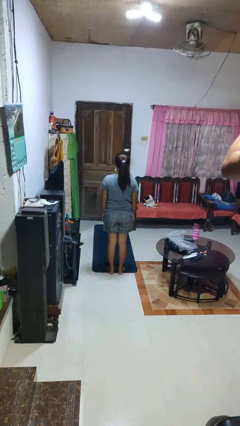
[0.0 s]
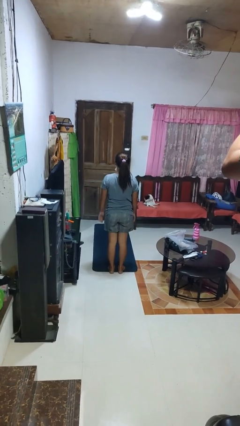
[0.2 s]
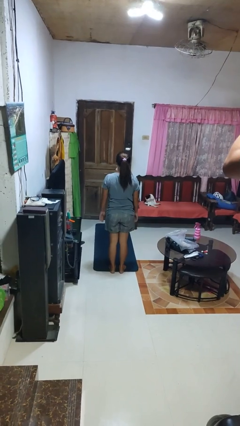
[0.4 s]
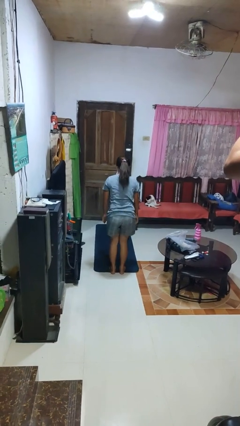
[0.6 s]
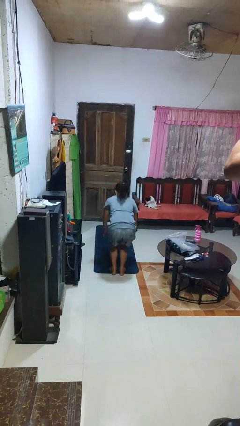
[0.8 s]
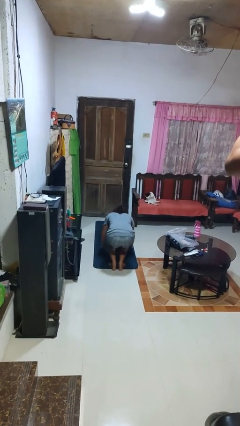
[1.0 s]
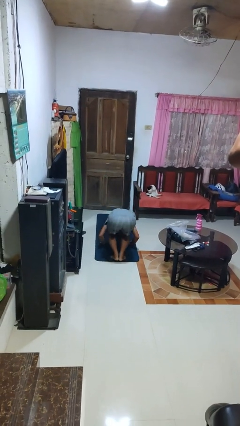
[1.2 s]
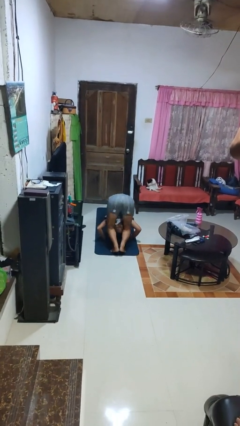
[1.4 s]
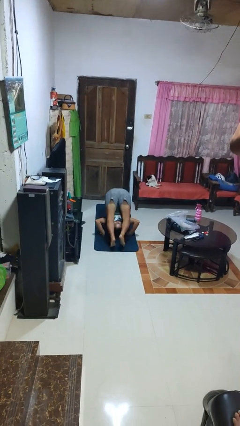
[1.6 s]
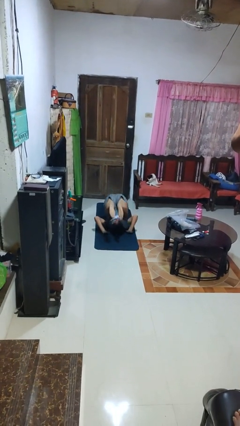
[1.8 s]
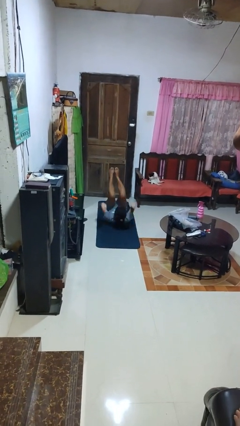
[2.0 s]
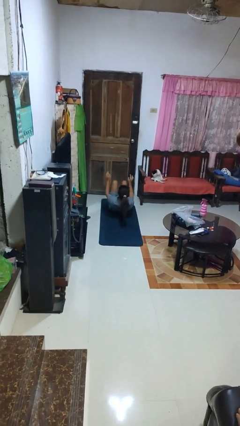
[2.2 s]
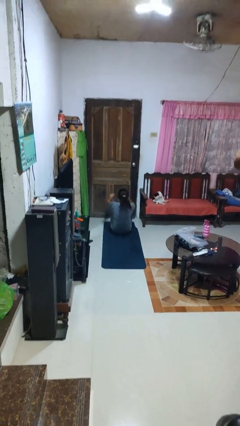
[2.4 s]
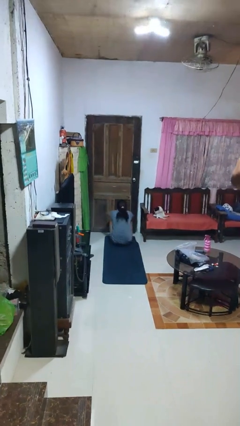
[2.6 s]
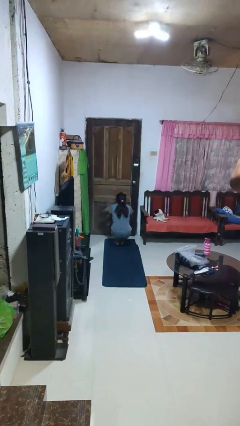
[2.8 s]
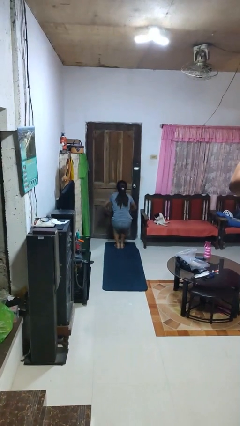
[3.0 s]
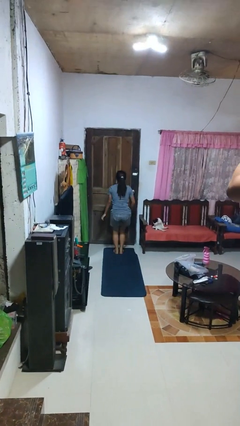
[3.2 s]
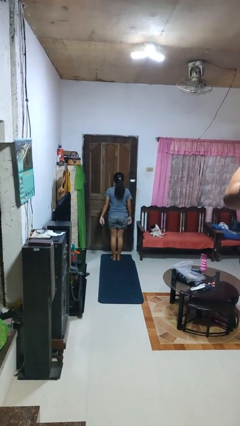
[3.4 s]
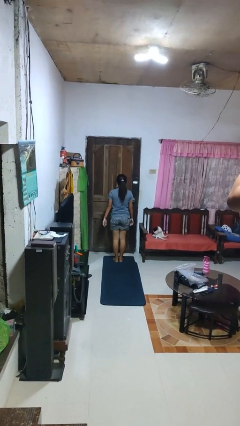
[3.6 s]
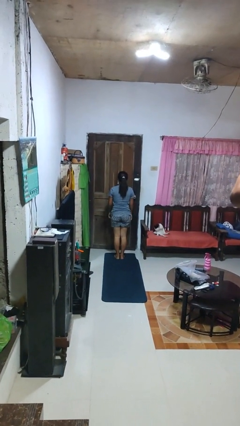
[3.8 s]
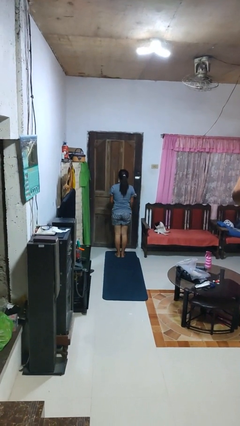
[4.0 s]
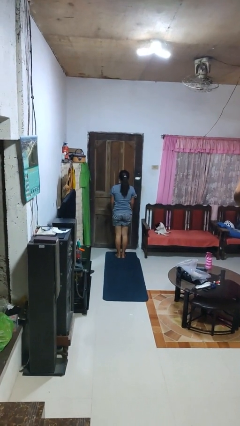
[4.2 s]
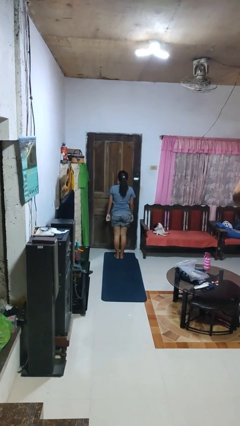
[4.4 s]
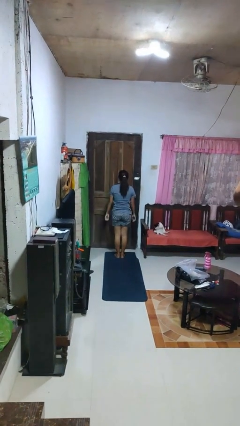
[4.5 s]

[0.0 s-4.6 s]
person somersaults

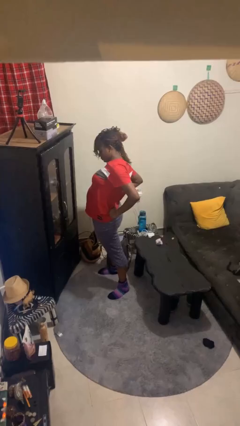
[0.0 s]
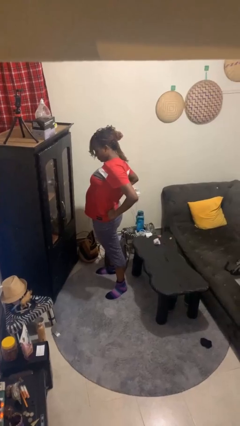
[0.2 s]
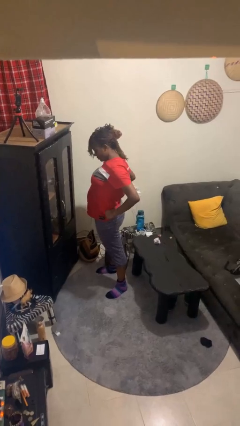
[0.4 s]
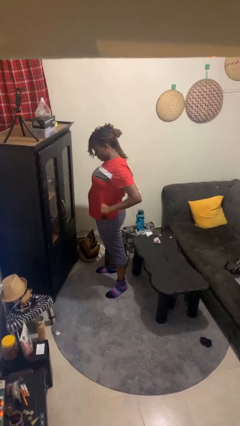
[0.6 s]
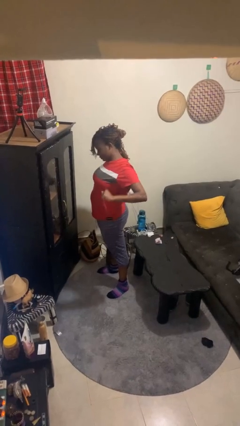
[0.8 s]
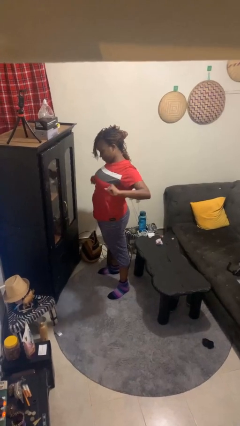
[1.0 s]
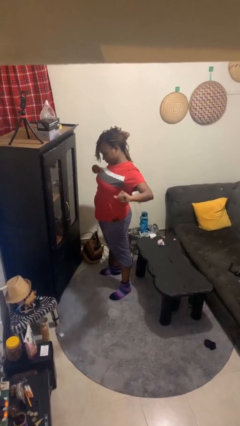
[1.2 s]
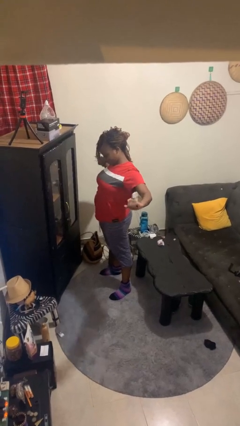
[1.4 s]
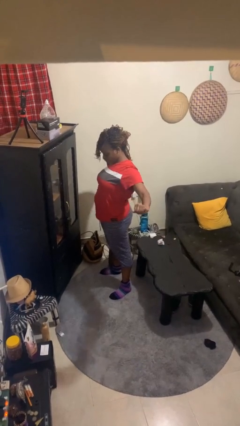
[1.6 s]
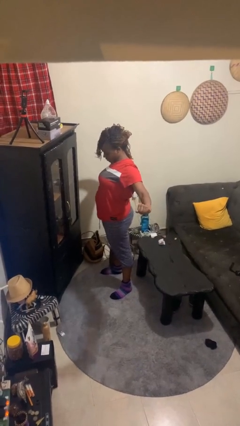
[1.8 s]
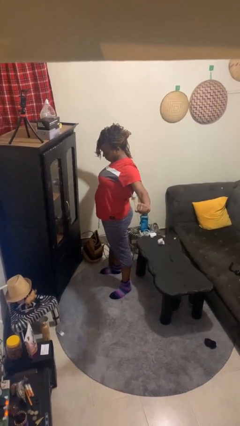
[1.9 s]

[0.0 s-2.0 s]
person stretches arms to side

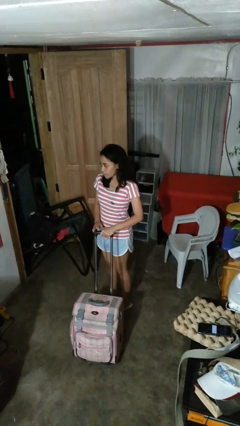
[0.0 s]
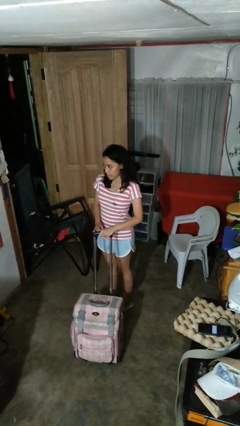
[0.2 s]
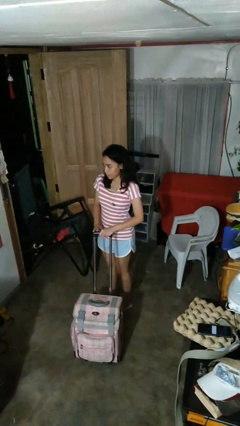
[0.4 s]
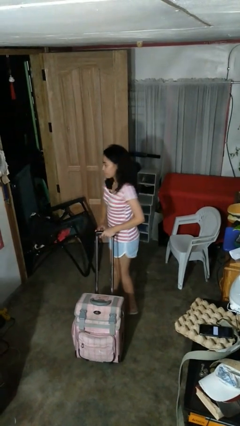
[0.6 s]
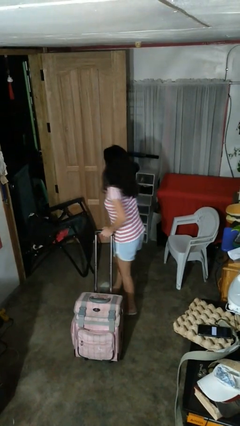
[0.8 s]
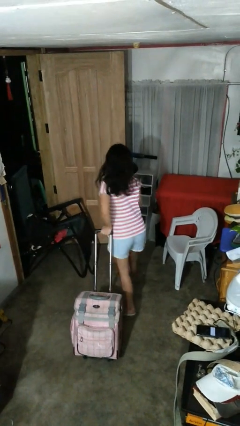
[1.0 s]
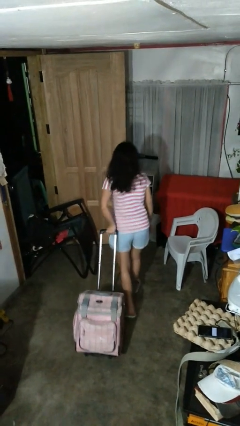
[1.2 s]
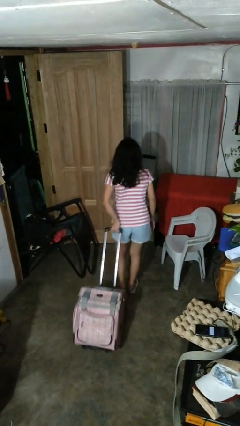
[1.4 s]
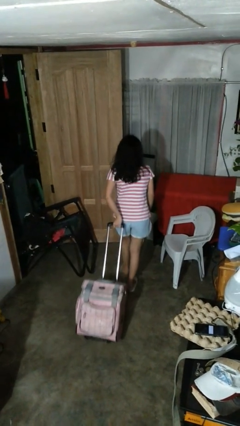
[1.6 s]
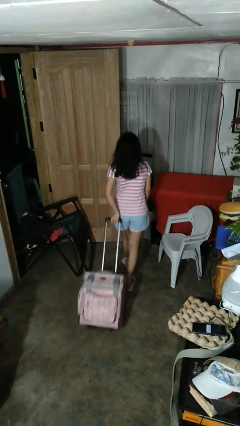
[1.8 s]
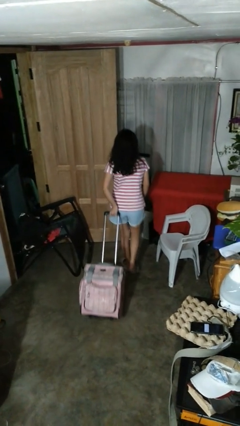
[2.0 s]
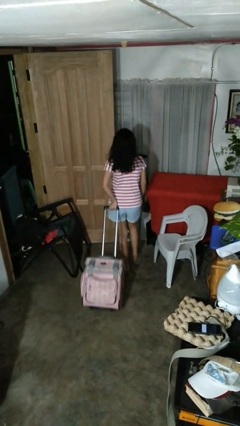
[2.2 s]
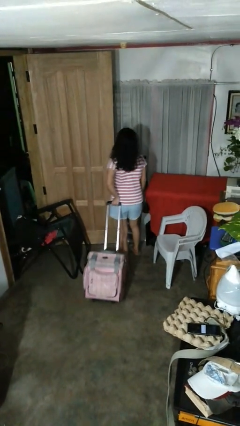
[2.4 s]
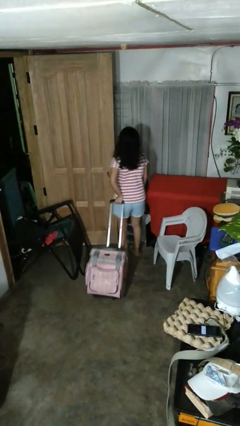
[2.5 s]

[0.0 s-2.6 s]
person pulls wheeled cart

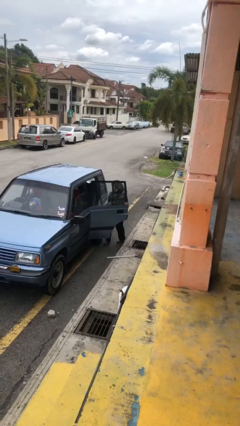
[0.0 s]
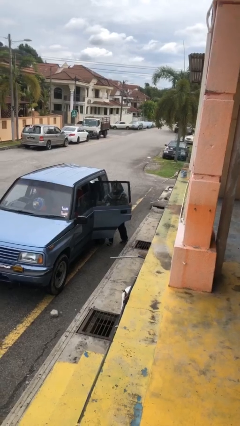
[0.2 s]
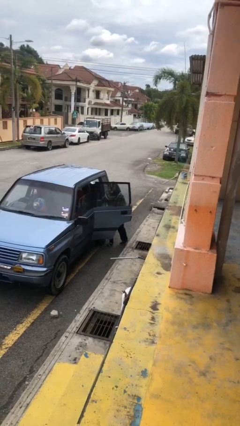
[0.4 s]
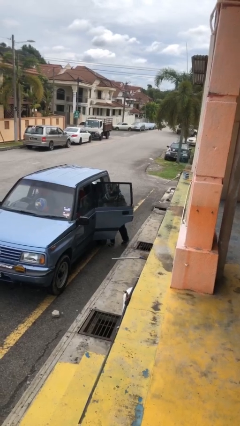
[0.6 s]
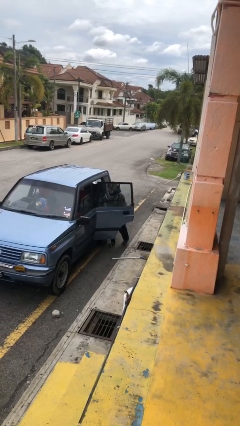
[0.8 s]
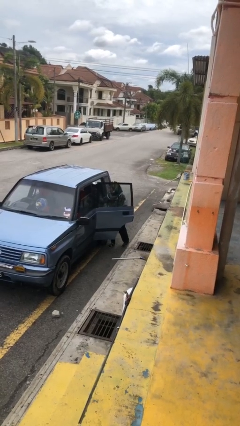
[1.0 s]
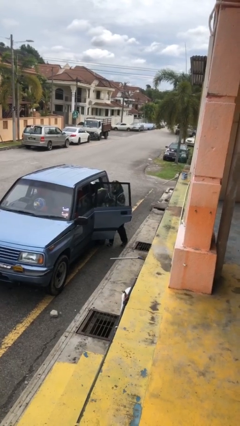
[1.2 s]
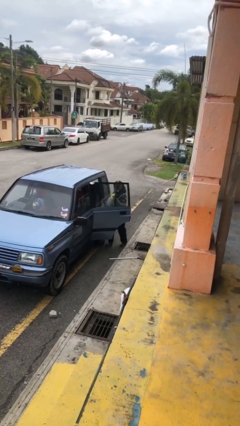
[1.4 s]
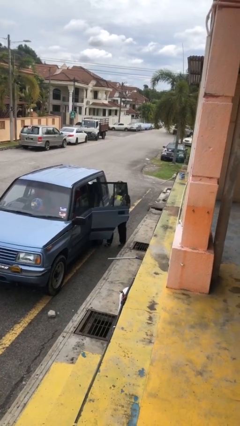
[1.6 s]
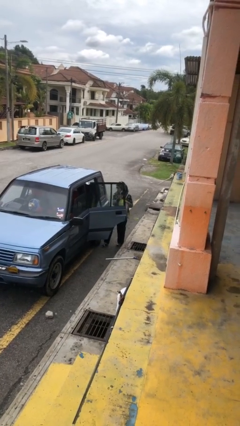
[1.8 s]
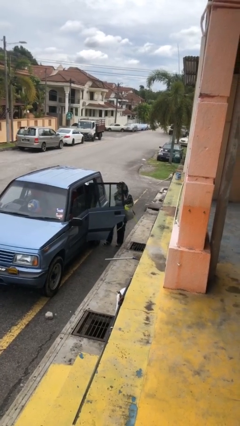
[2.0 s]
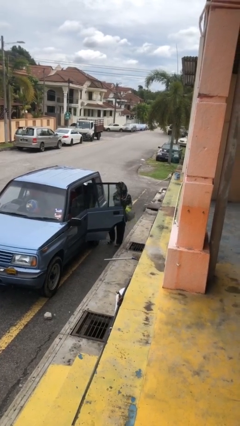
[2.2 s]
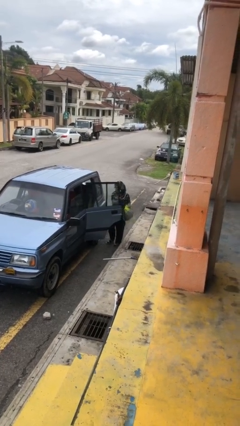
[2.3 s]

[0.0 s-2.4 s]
person unloads car

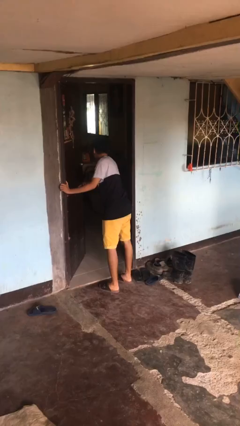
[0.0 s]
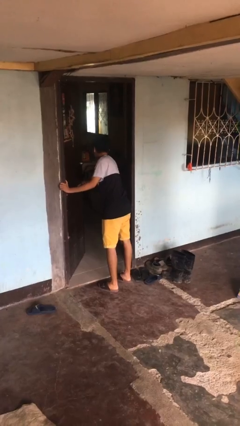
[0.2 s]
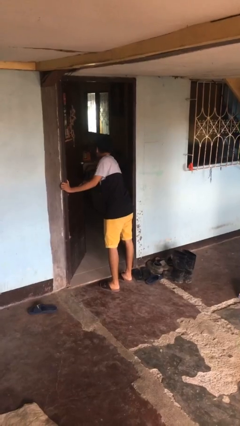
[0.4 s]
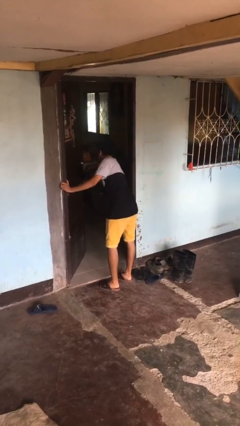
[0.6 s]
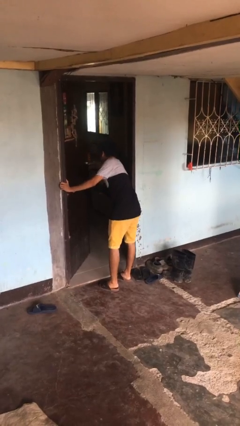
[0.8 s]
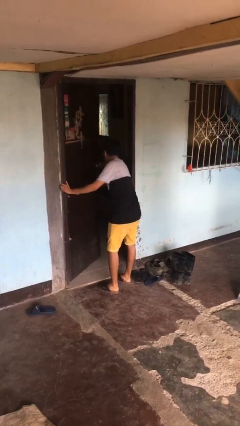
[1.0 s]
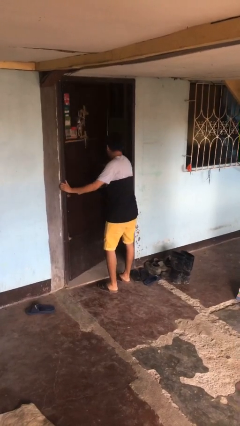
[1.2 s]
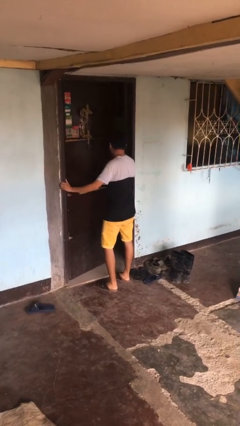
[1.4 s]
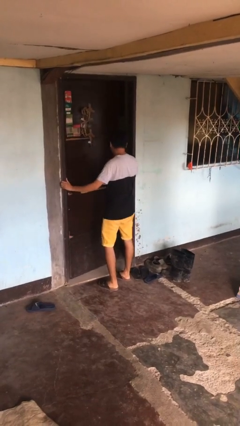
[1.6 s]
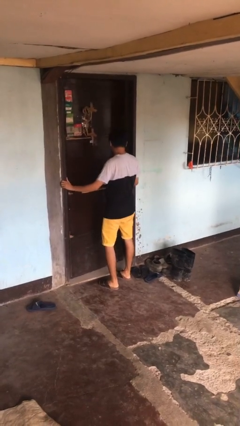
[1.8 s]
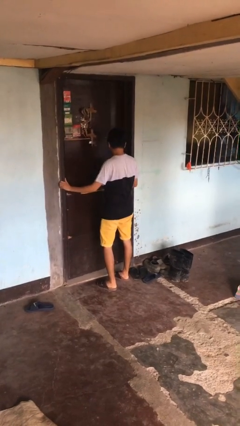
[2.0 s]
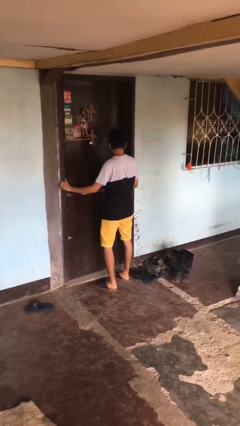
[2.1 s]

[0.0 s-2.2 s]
person closes facility door

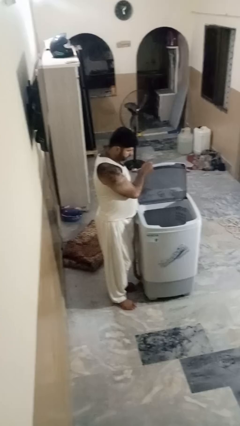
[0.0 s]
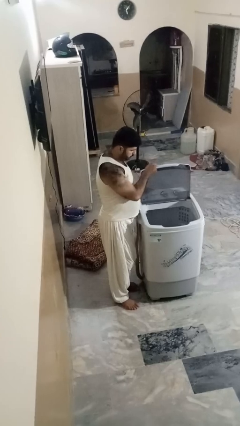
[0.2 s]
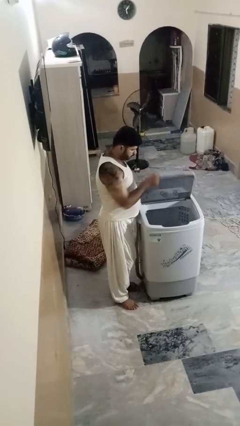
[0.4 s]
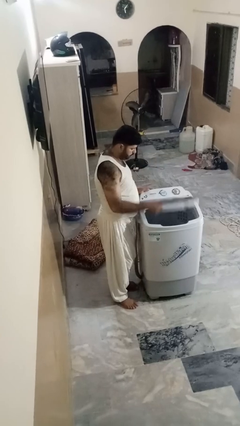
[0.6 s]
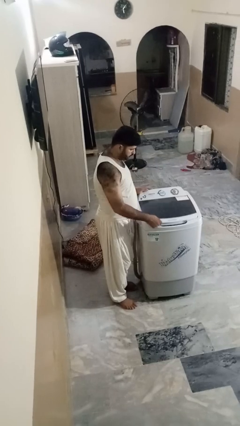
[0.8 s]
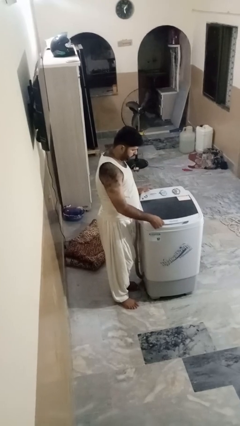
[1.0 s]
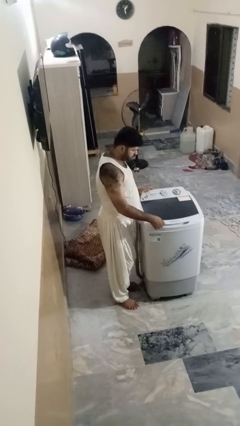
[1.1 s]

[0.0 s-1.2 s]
person closes clothes washer

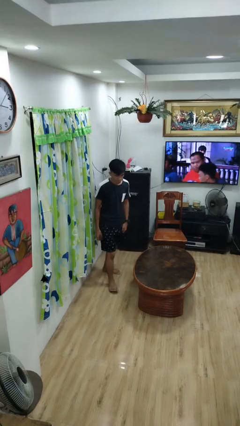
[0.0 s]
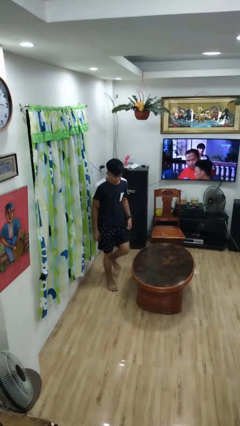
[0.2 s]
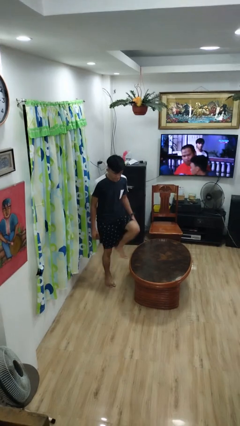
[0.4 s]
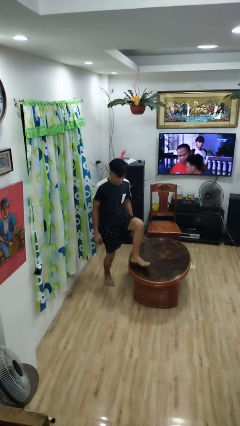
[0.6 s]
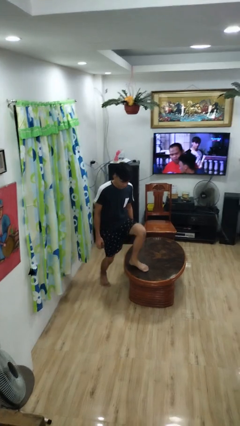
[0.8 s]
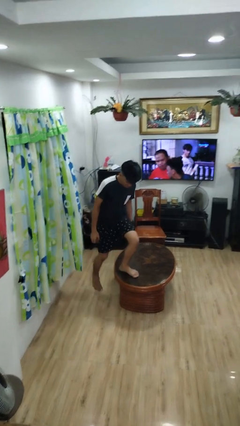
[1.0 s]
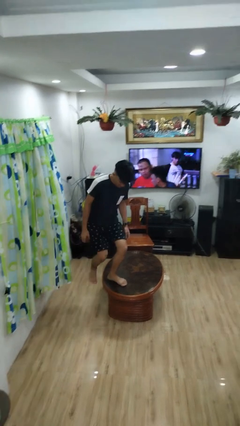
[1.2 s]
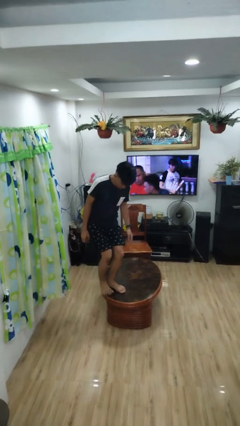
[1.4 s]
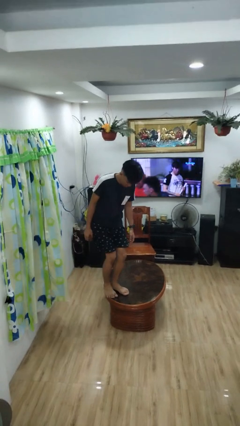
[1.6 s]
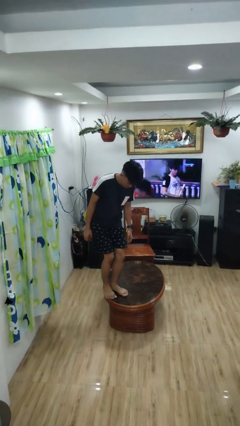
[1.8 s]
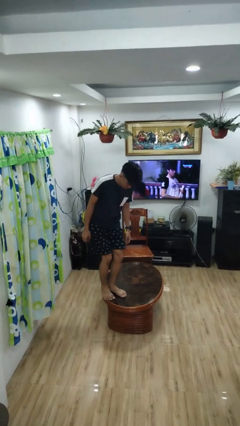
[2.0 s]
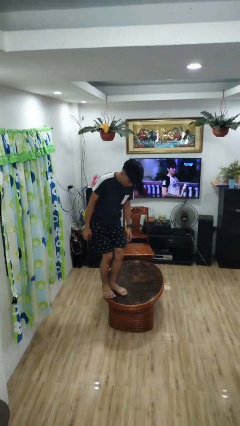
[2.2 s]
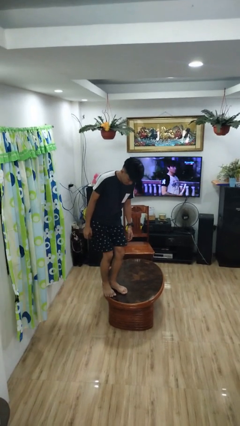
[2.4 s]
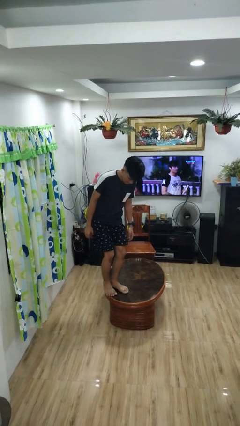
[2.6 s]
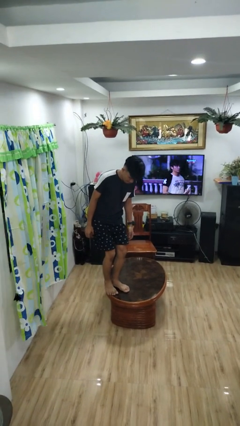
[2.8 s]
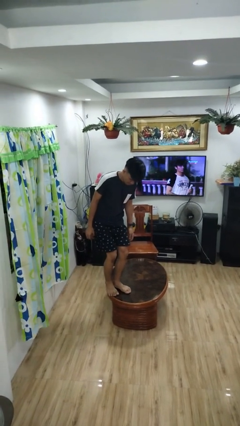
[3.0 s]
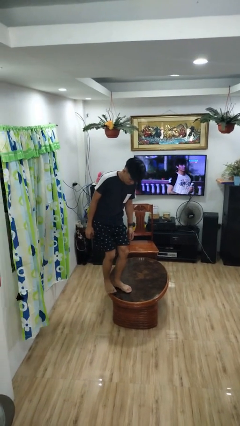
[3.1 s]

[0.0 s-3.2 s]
person climbs on table
